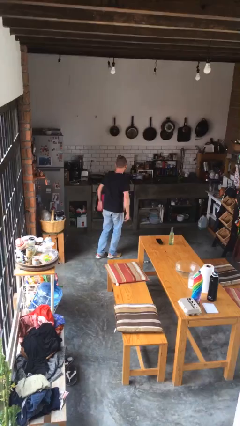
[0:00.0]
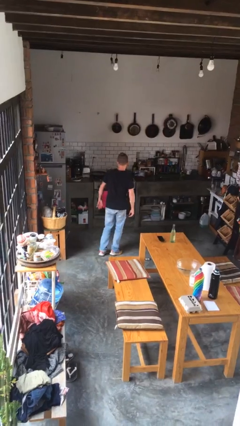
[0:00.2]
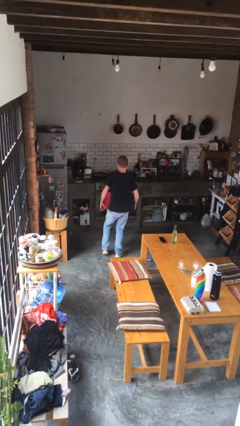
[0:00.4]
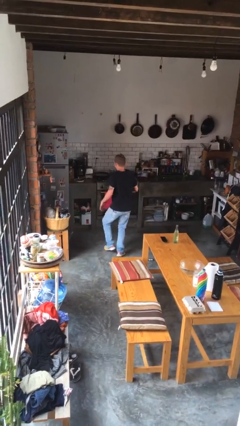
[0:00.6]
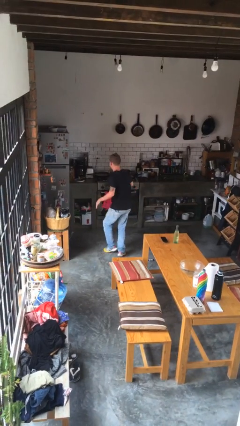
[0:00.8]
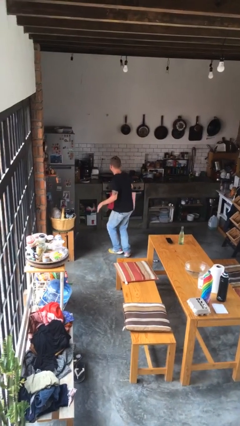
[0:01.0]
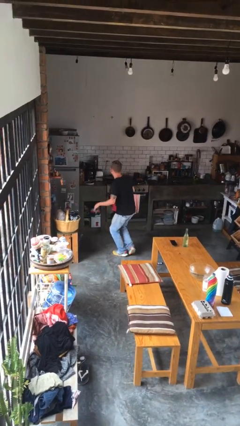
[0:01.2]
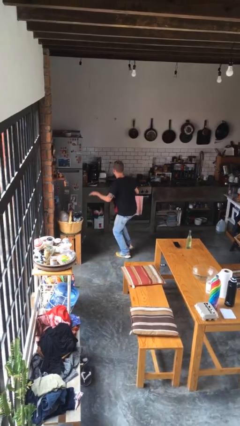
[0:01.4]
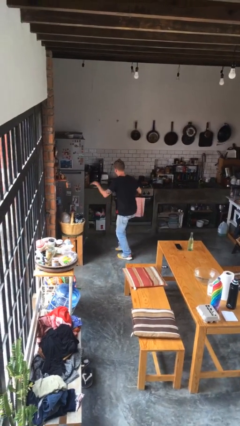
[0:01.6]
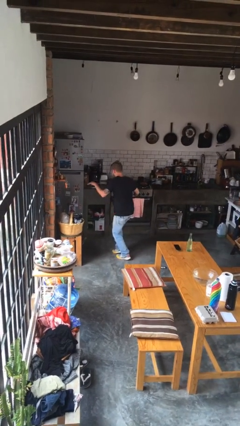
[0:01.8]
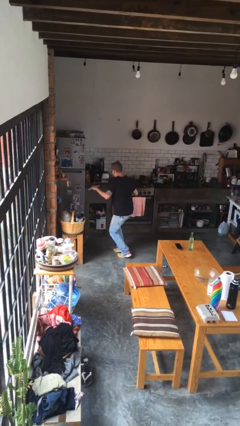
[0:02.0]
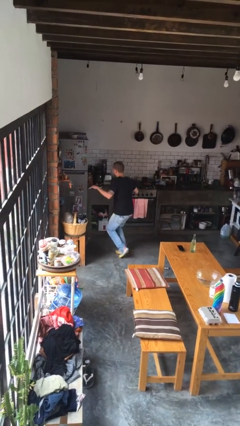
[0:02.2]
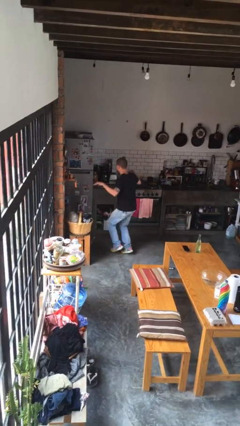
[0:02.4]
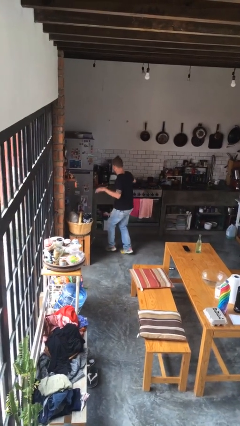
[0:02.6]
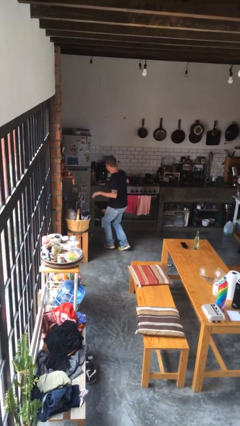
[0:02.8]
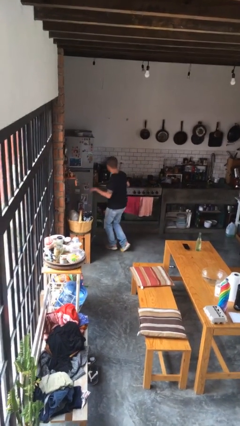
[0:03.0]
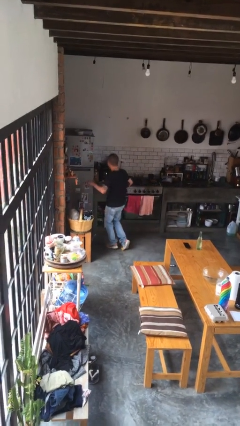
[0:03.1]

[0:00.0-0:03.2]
person walks tiptoe

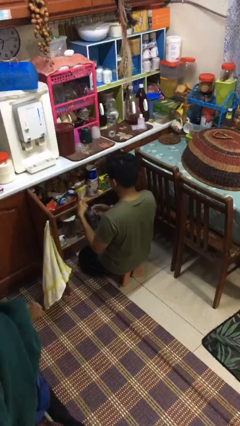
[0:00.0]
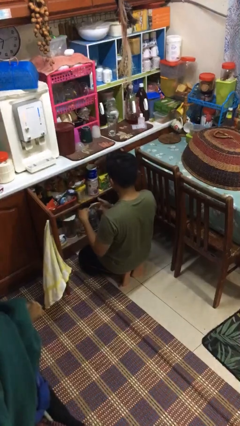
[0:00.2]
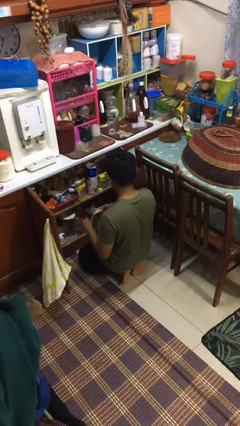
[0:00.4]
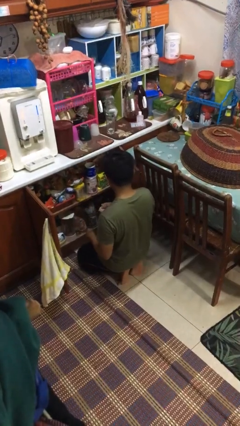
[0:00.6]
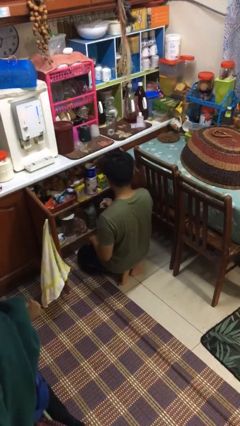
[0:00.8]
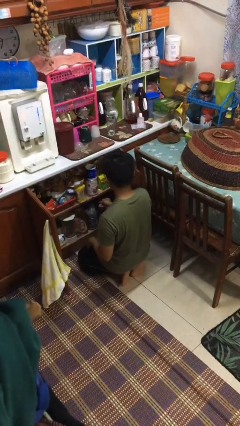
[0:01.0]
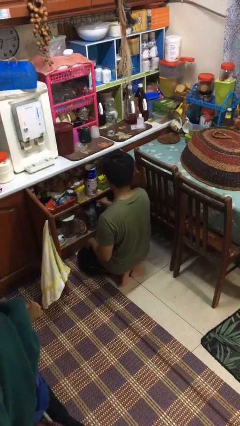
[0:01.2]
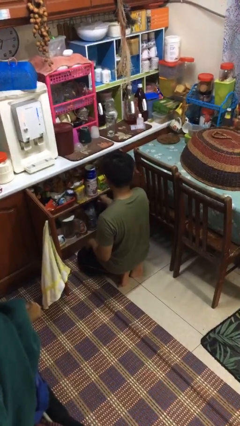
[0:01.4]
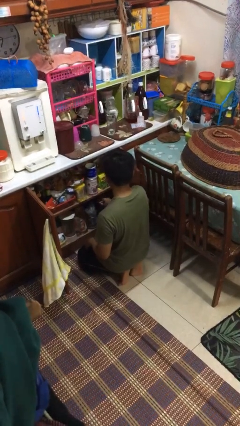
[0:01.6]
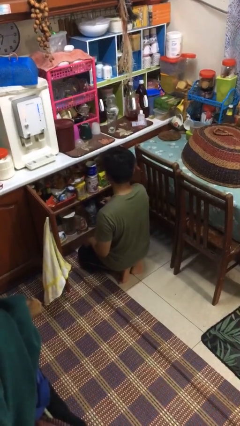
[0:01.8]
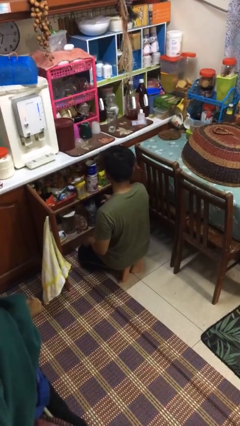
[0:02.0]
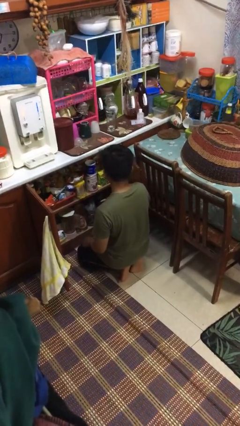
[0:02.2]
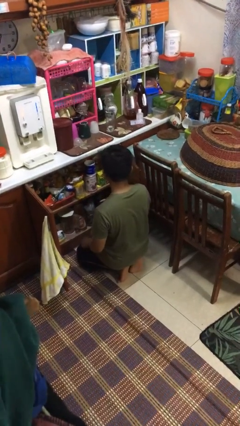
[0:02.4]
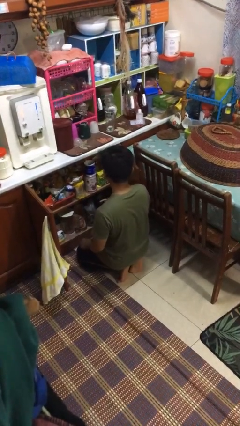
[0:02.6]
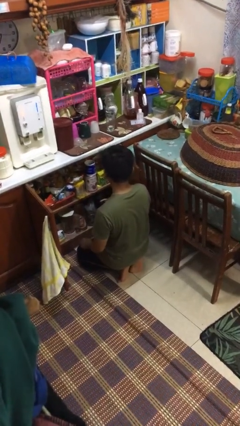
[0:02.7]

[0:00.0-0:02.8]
person puts object in cabinet

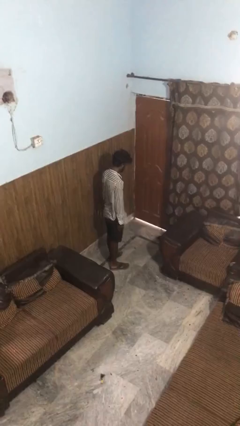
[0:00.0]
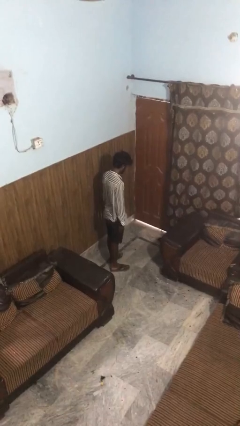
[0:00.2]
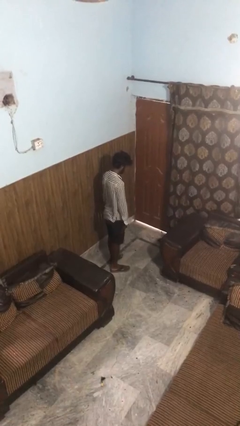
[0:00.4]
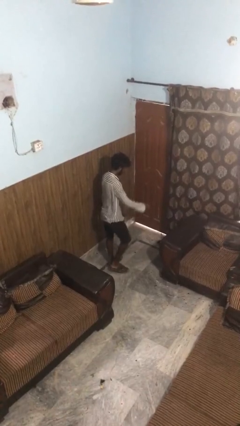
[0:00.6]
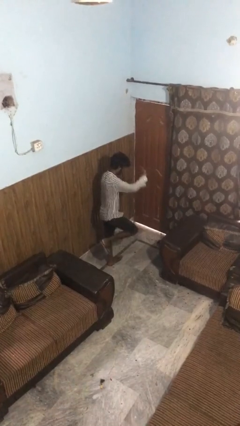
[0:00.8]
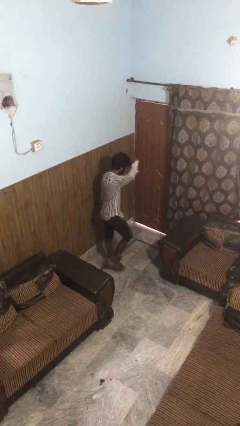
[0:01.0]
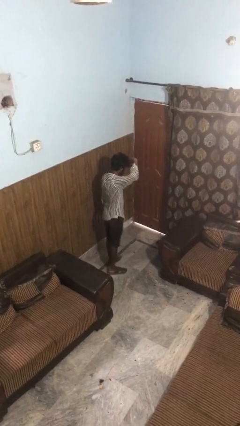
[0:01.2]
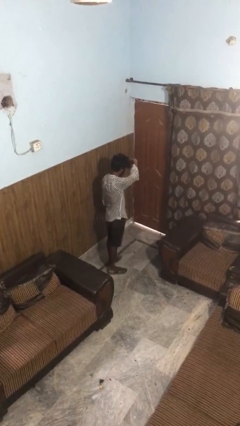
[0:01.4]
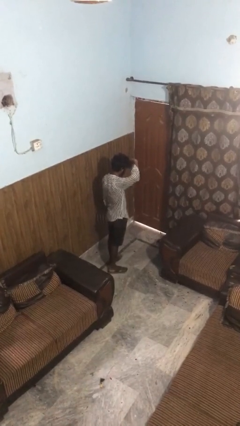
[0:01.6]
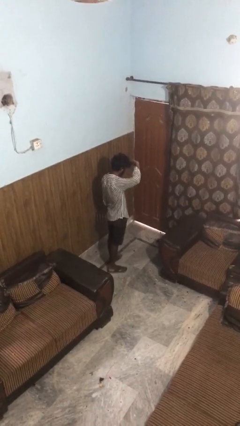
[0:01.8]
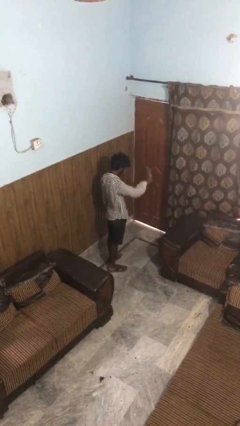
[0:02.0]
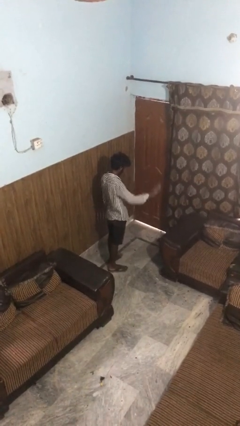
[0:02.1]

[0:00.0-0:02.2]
person salutes

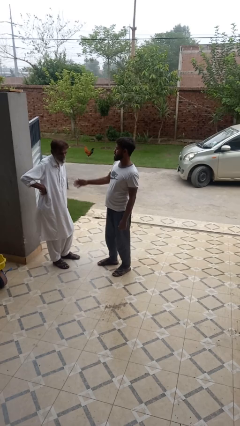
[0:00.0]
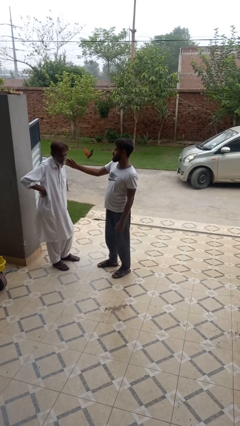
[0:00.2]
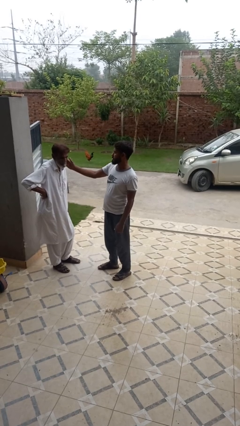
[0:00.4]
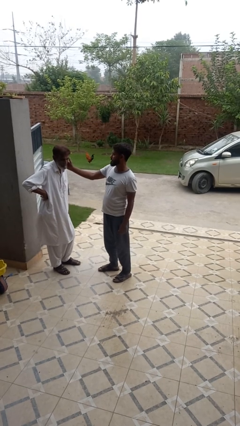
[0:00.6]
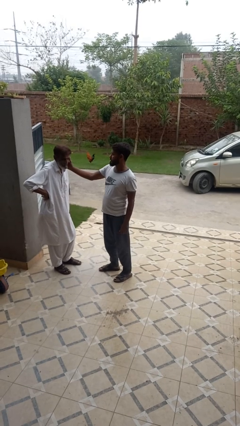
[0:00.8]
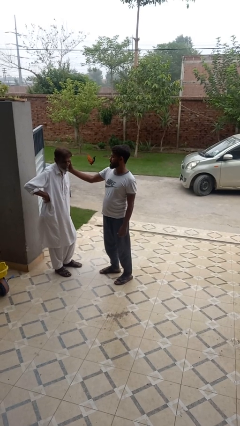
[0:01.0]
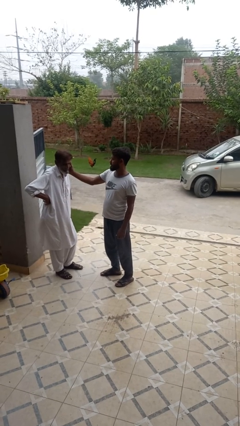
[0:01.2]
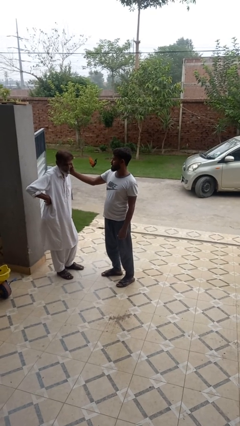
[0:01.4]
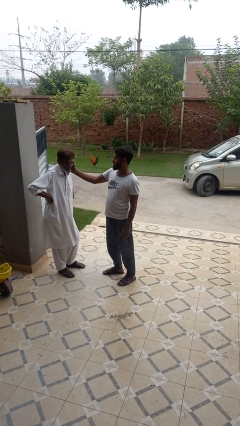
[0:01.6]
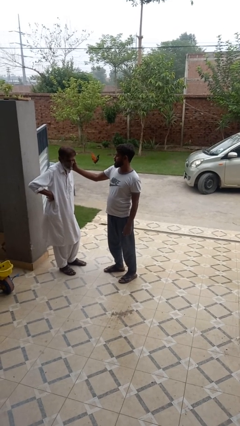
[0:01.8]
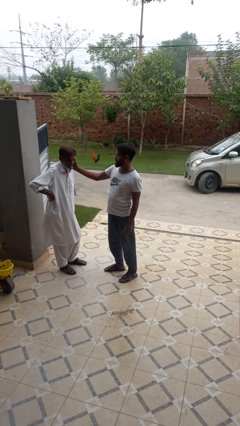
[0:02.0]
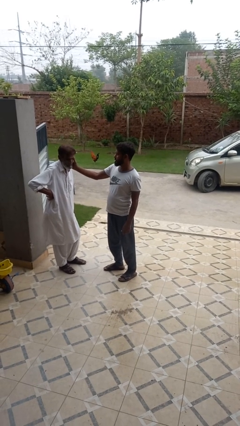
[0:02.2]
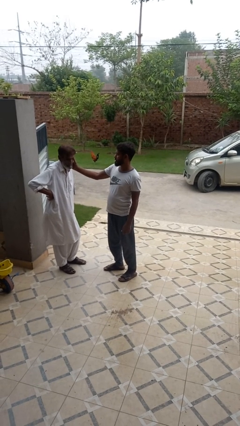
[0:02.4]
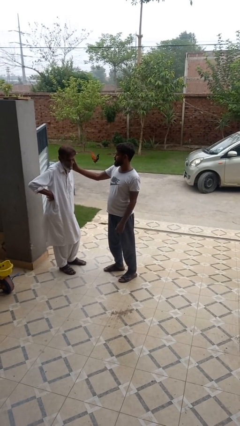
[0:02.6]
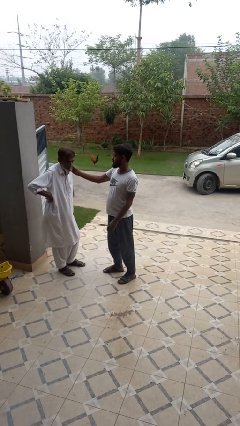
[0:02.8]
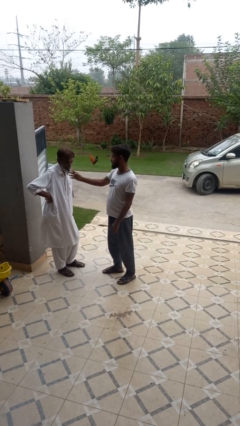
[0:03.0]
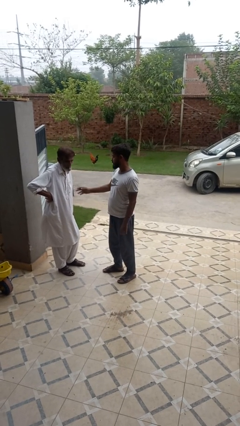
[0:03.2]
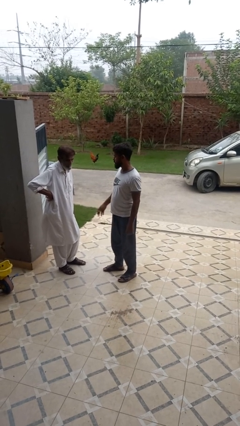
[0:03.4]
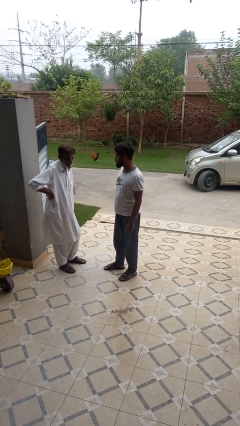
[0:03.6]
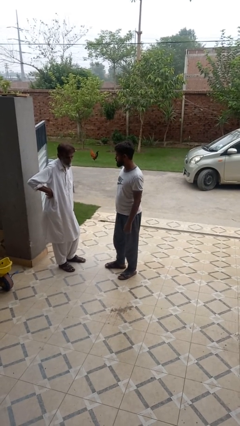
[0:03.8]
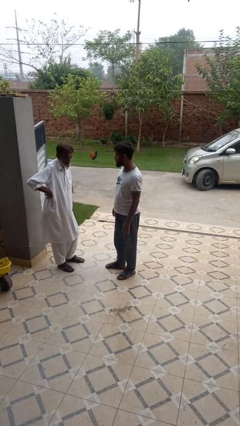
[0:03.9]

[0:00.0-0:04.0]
person touches face of person

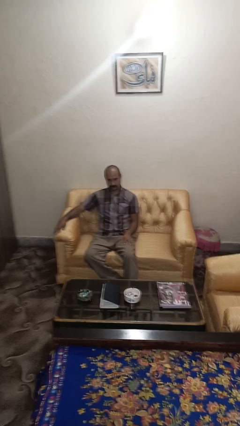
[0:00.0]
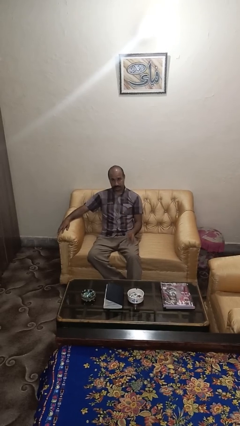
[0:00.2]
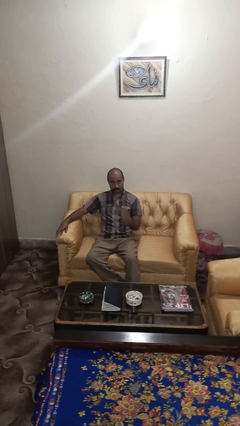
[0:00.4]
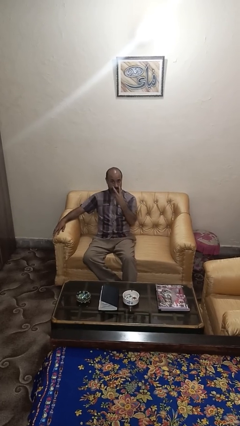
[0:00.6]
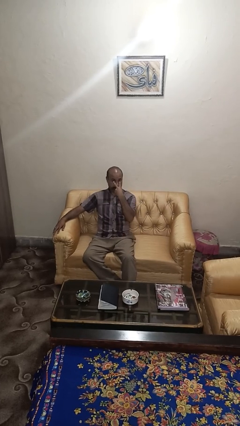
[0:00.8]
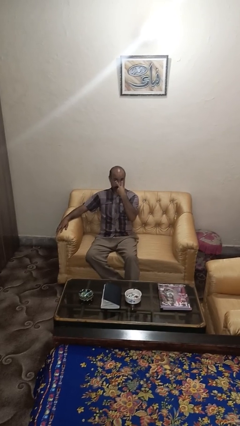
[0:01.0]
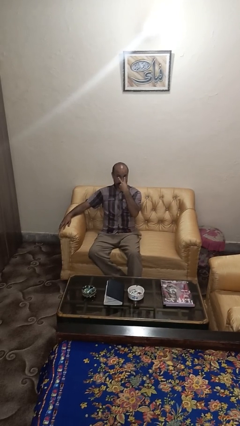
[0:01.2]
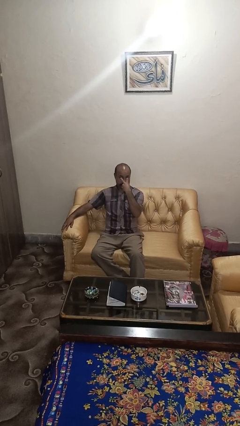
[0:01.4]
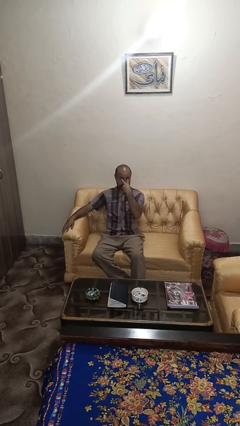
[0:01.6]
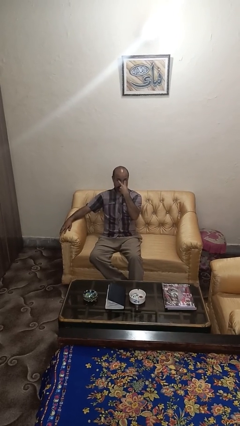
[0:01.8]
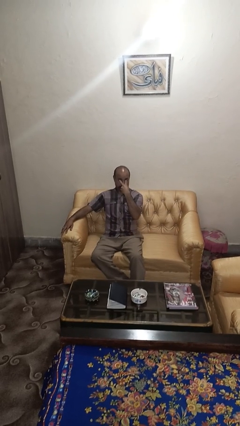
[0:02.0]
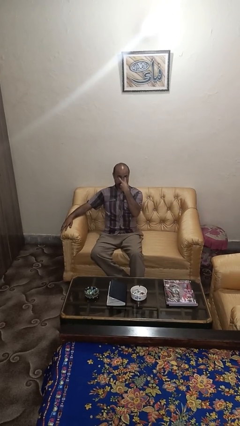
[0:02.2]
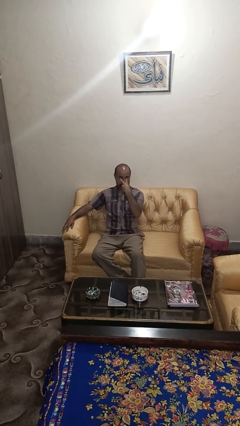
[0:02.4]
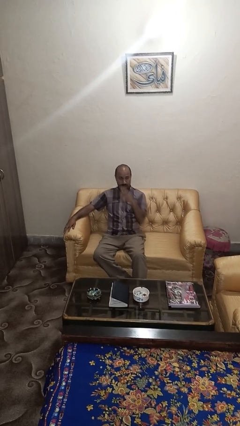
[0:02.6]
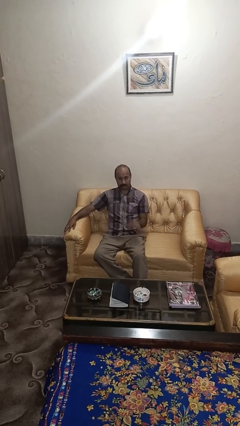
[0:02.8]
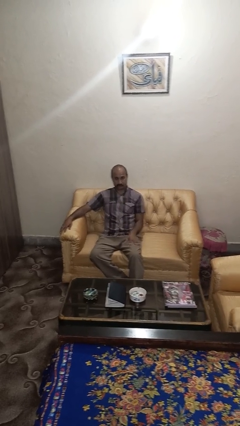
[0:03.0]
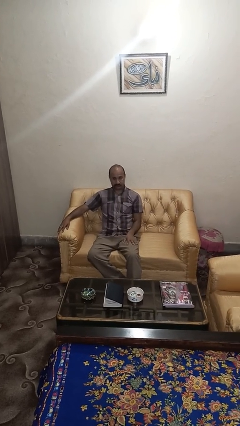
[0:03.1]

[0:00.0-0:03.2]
person gestures watch closely

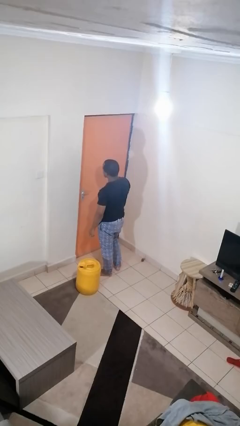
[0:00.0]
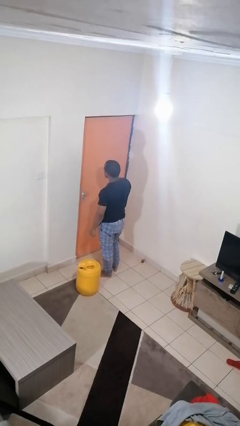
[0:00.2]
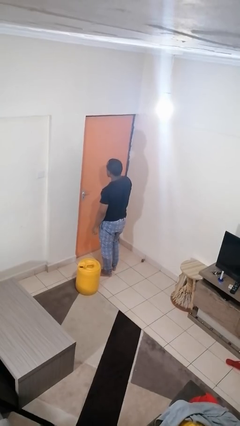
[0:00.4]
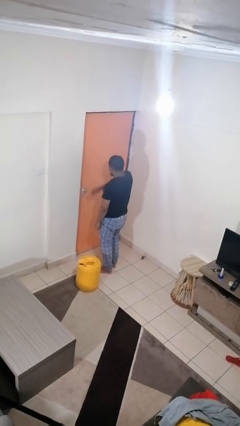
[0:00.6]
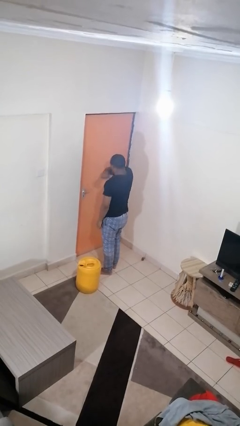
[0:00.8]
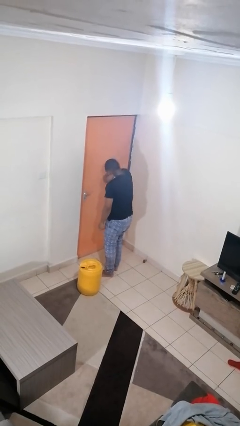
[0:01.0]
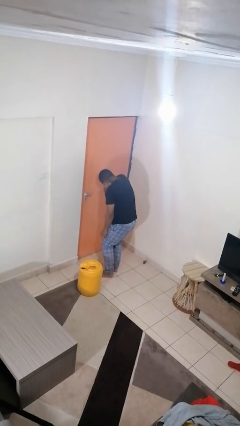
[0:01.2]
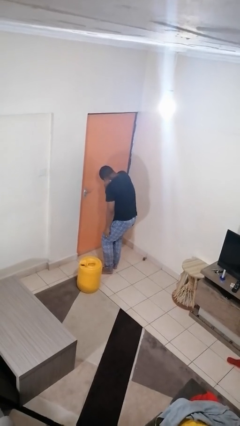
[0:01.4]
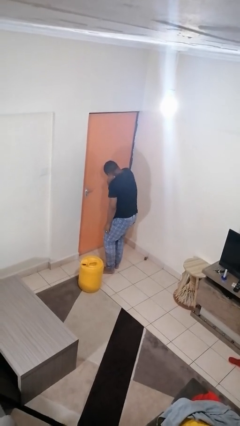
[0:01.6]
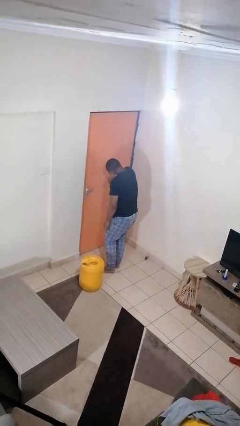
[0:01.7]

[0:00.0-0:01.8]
person sneezes into arm
